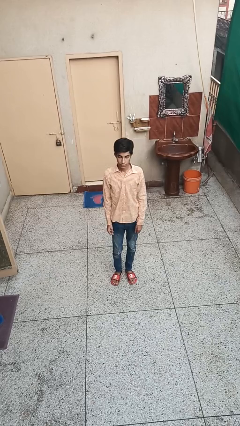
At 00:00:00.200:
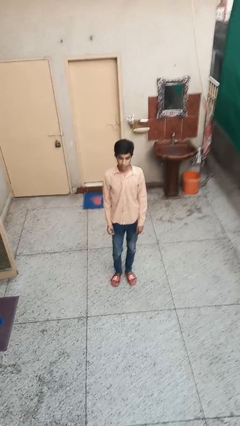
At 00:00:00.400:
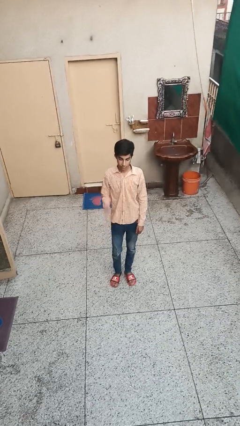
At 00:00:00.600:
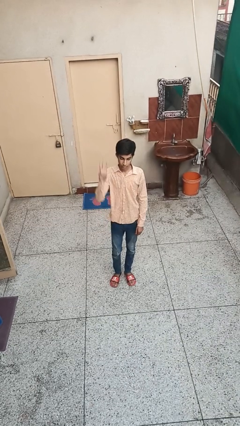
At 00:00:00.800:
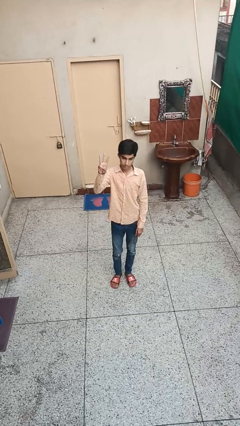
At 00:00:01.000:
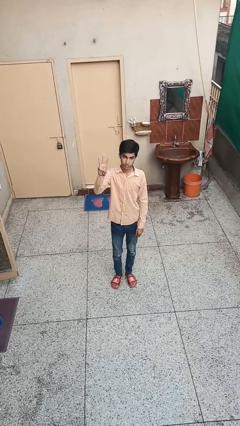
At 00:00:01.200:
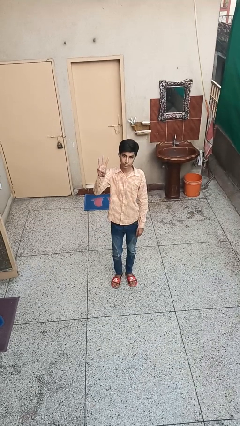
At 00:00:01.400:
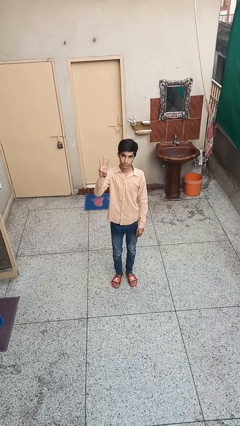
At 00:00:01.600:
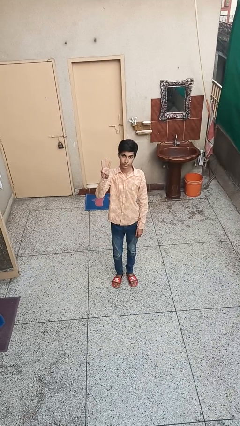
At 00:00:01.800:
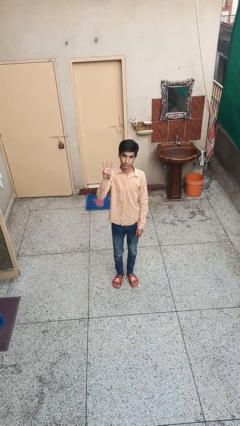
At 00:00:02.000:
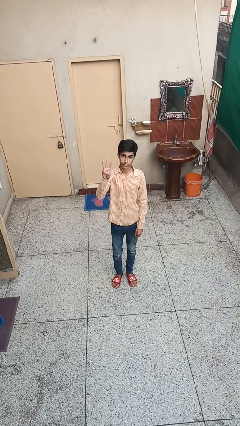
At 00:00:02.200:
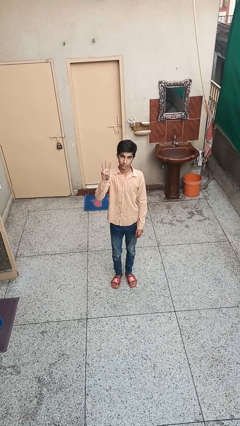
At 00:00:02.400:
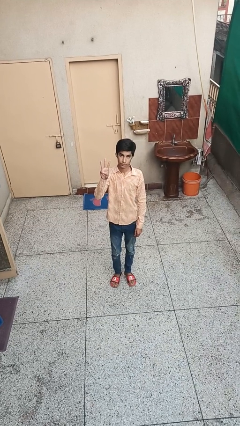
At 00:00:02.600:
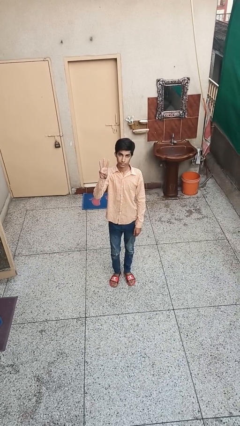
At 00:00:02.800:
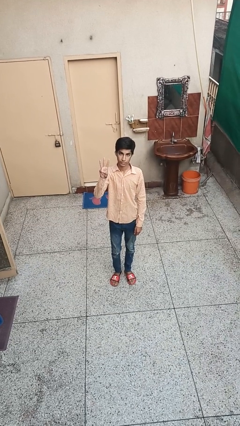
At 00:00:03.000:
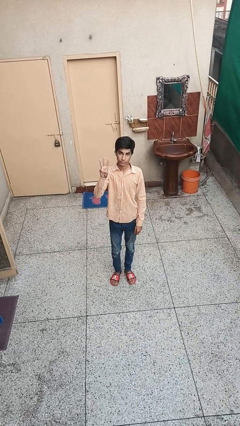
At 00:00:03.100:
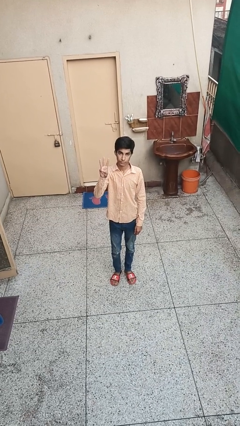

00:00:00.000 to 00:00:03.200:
person gestures number three

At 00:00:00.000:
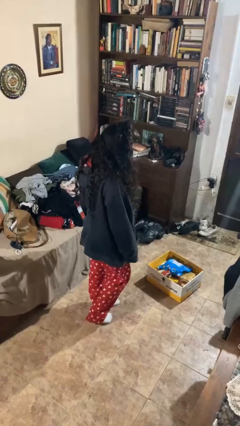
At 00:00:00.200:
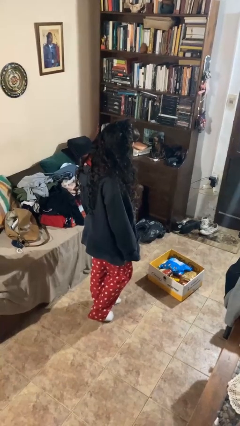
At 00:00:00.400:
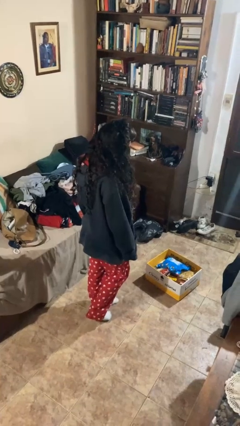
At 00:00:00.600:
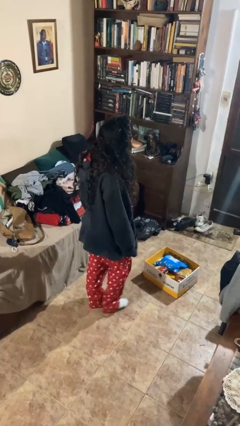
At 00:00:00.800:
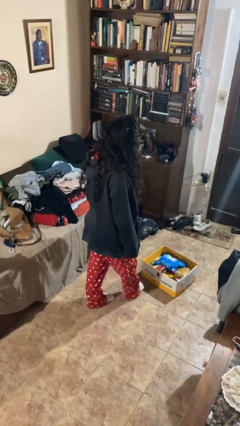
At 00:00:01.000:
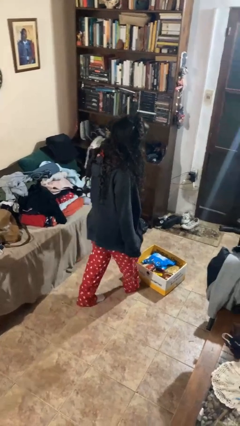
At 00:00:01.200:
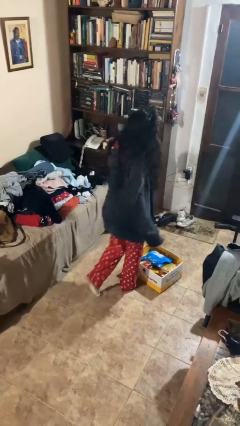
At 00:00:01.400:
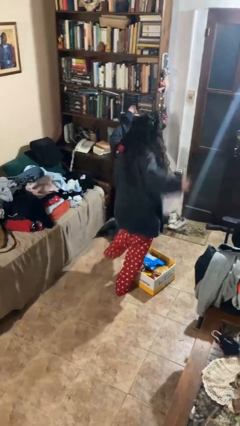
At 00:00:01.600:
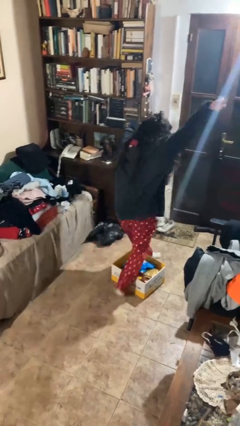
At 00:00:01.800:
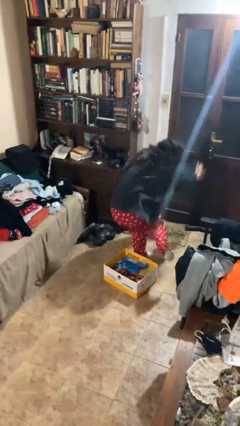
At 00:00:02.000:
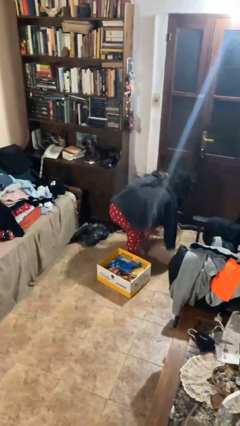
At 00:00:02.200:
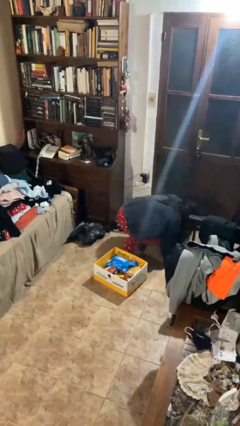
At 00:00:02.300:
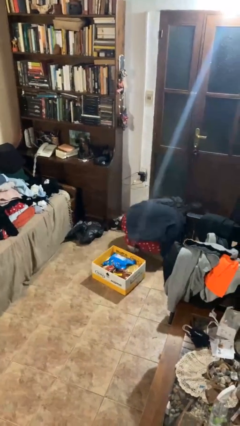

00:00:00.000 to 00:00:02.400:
person trips on object on floor

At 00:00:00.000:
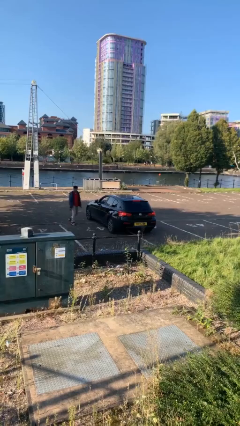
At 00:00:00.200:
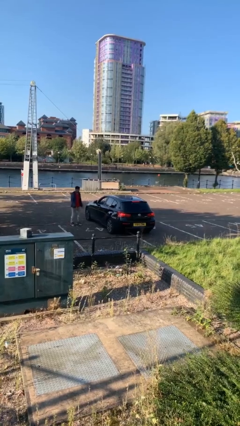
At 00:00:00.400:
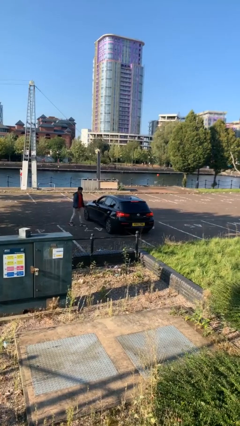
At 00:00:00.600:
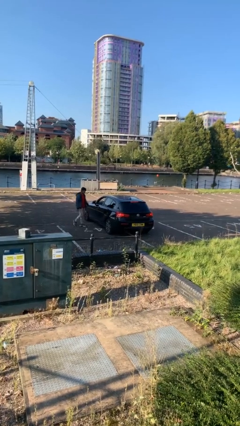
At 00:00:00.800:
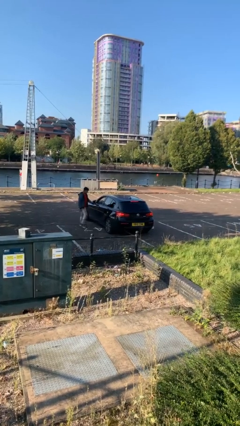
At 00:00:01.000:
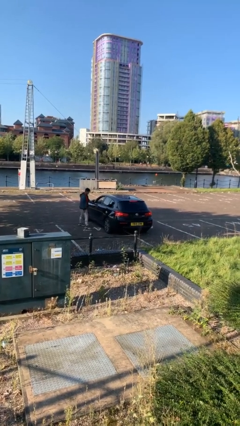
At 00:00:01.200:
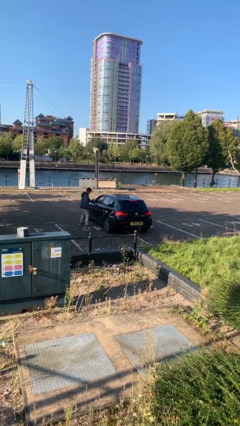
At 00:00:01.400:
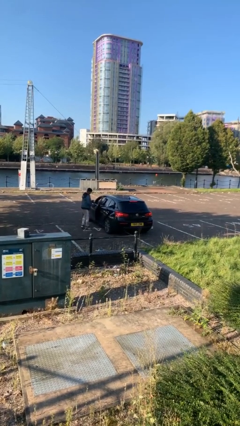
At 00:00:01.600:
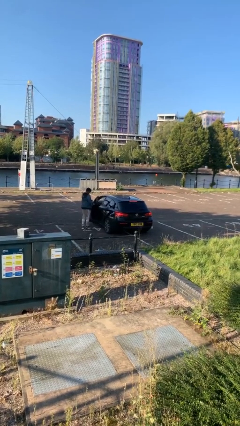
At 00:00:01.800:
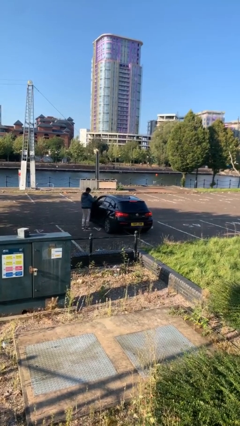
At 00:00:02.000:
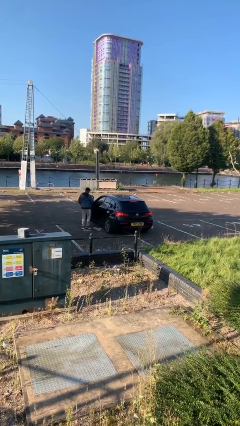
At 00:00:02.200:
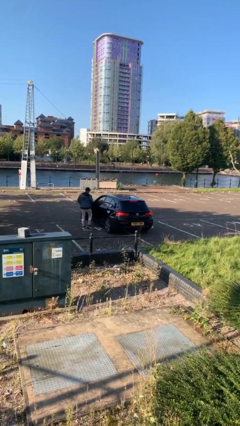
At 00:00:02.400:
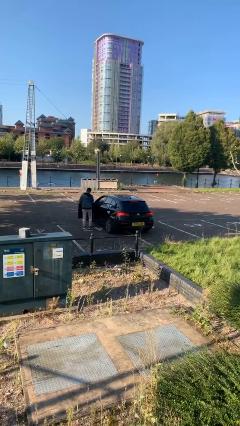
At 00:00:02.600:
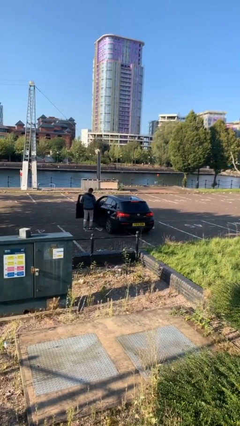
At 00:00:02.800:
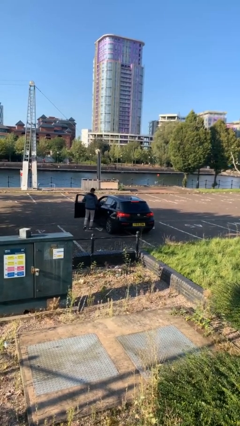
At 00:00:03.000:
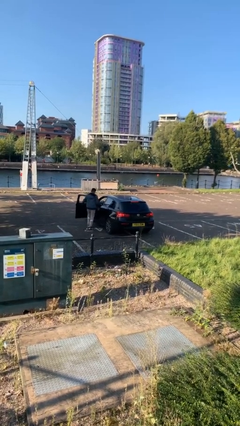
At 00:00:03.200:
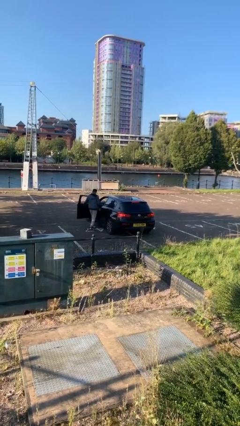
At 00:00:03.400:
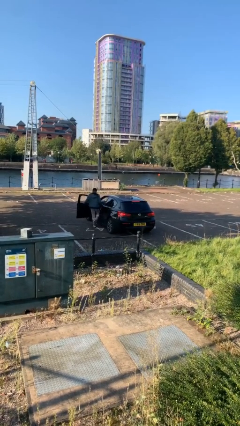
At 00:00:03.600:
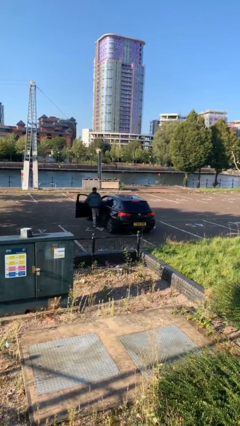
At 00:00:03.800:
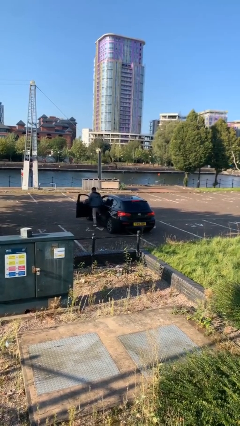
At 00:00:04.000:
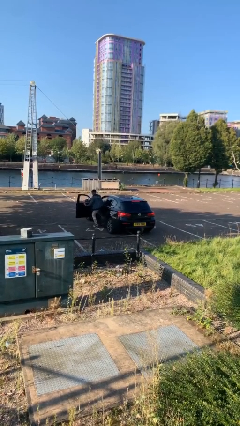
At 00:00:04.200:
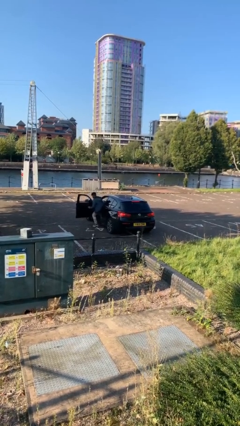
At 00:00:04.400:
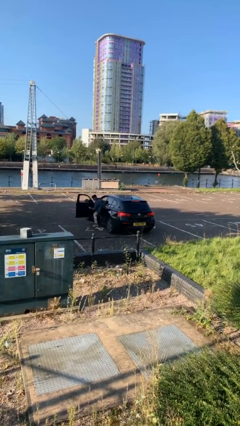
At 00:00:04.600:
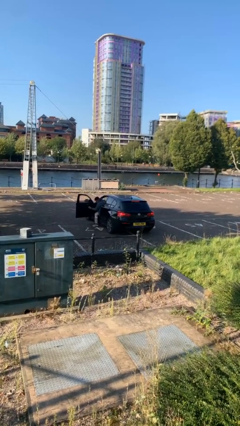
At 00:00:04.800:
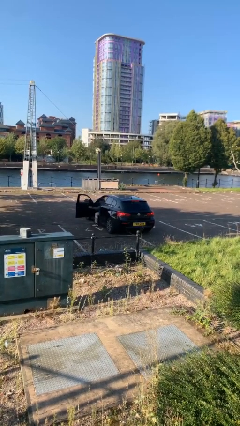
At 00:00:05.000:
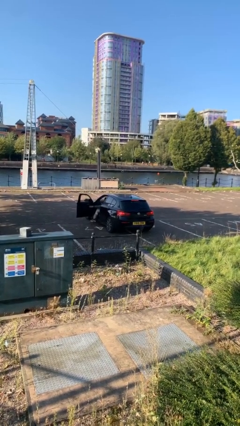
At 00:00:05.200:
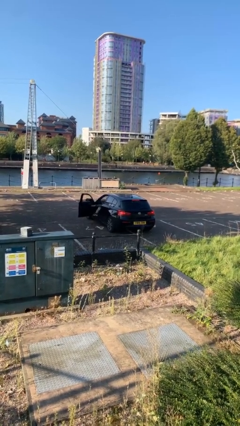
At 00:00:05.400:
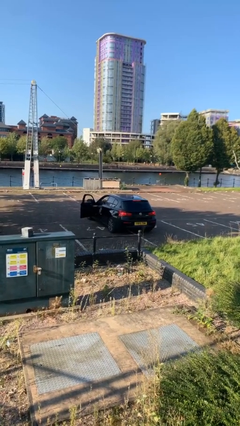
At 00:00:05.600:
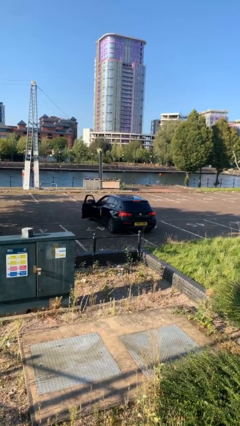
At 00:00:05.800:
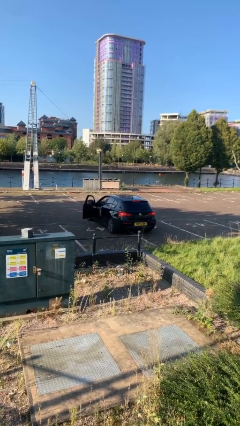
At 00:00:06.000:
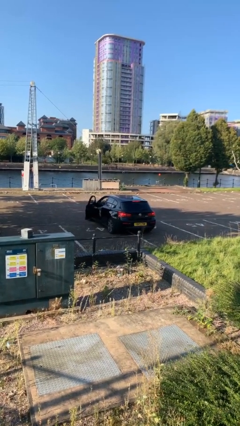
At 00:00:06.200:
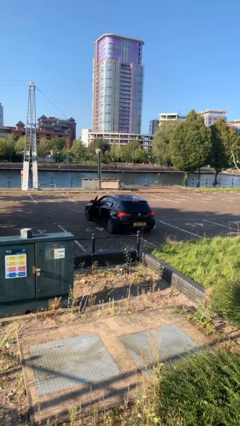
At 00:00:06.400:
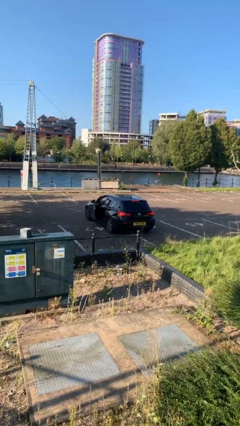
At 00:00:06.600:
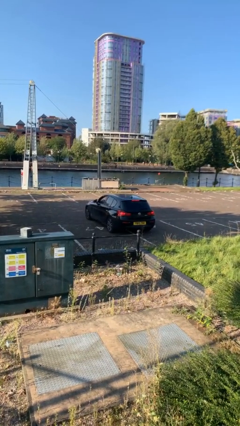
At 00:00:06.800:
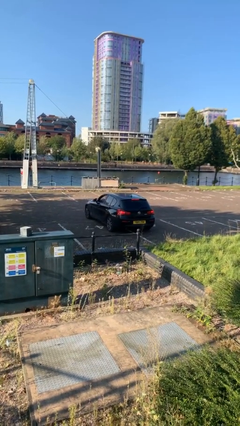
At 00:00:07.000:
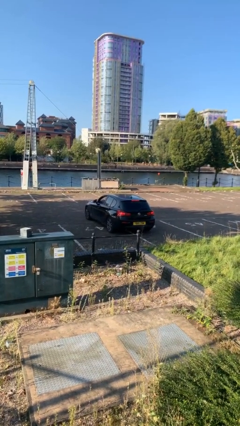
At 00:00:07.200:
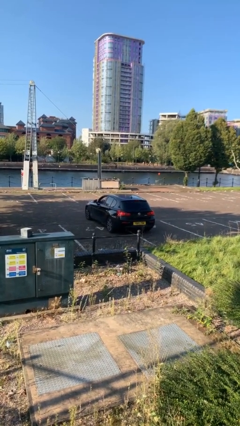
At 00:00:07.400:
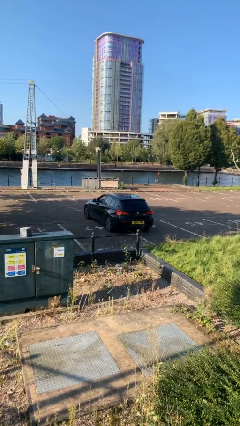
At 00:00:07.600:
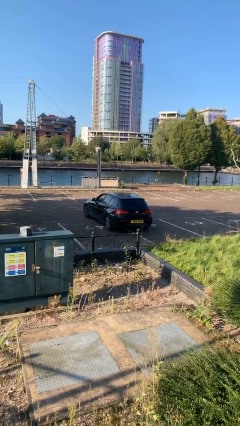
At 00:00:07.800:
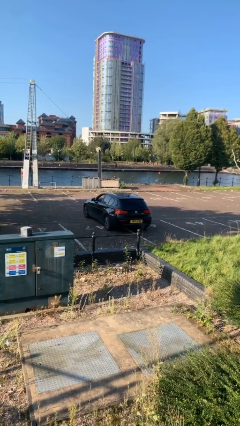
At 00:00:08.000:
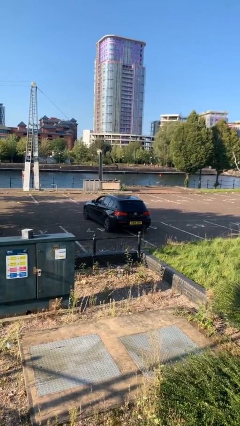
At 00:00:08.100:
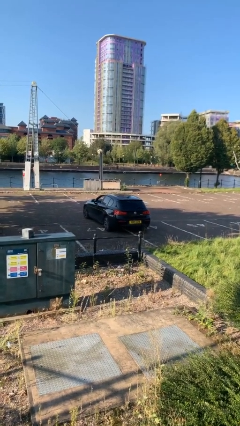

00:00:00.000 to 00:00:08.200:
car picks up person

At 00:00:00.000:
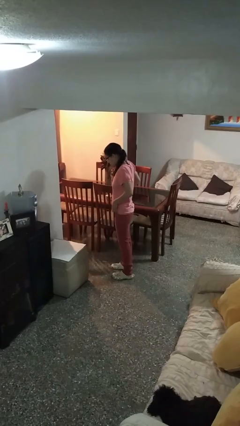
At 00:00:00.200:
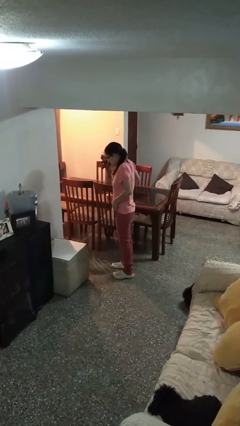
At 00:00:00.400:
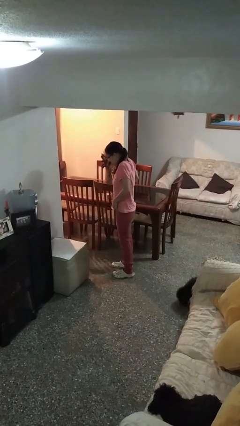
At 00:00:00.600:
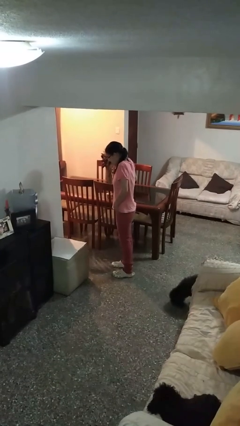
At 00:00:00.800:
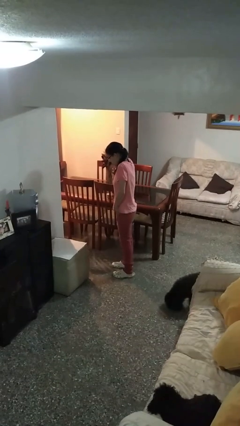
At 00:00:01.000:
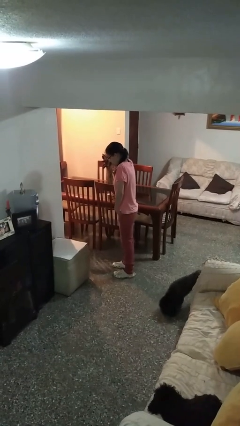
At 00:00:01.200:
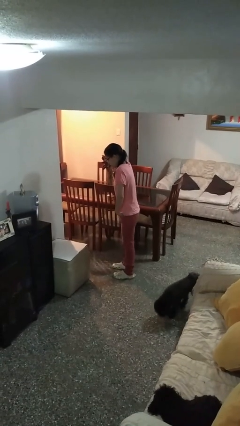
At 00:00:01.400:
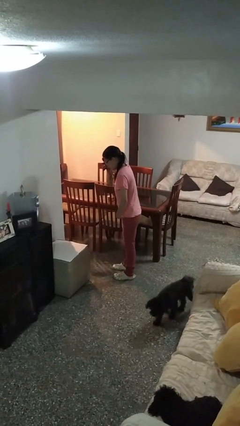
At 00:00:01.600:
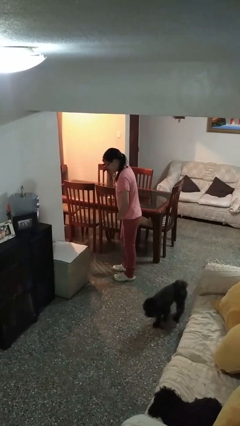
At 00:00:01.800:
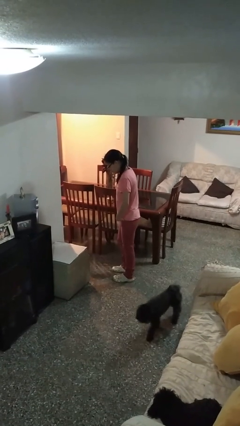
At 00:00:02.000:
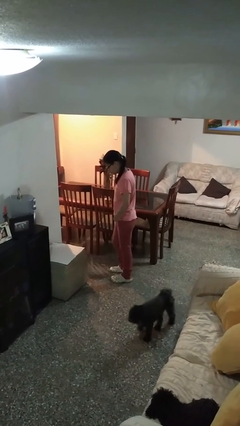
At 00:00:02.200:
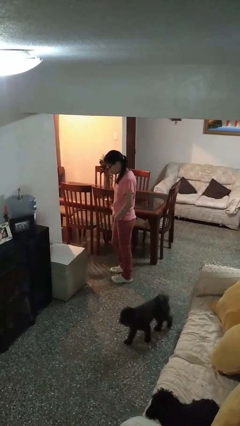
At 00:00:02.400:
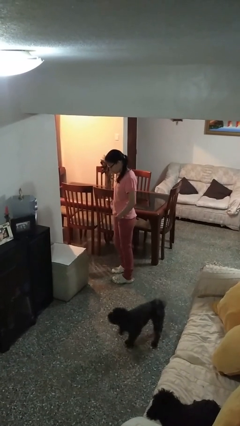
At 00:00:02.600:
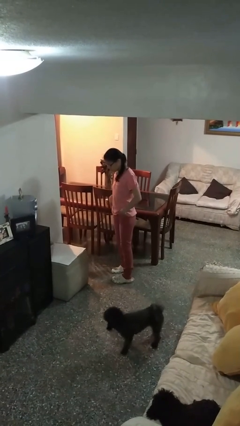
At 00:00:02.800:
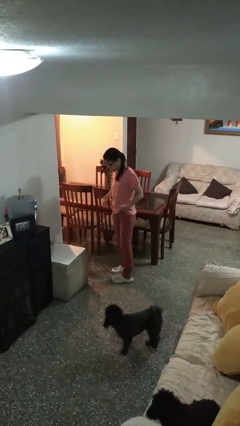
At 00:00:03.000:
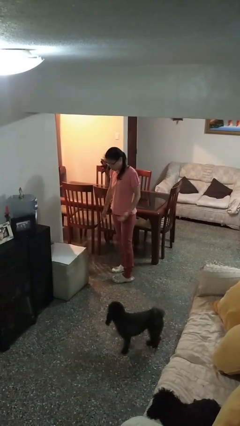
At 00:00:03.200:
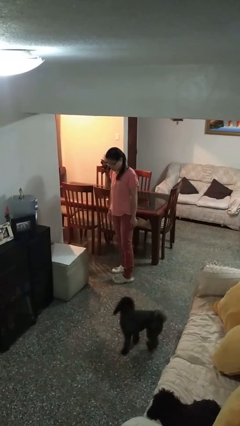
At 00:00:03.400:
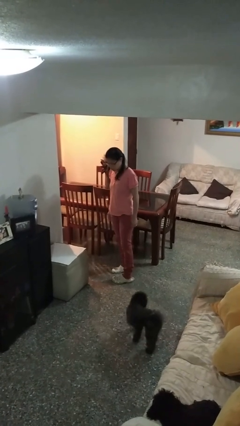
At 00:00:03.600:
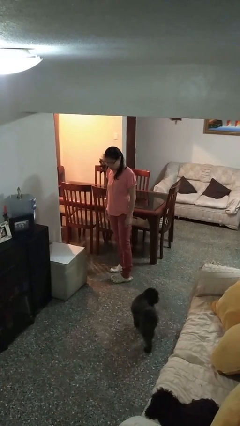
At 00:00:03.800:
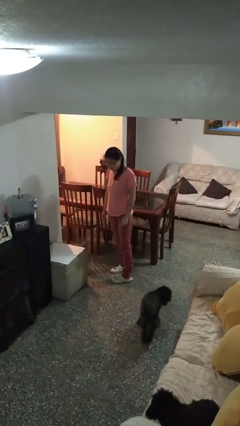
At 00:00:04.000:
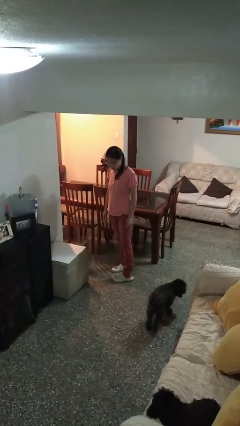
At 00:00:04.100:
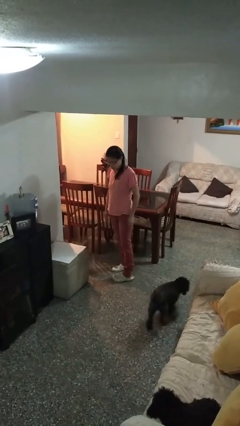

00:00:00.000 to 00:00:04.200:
person puts hands in back pockets
